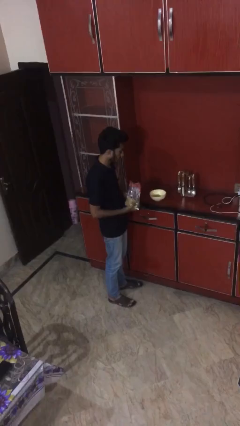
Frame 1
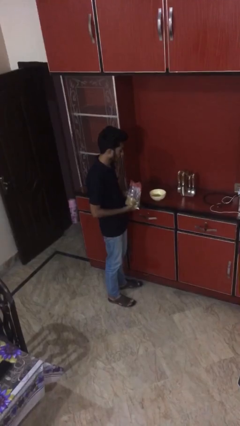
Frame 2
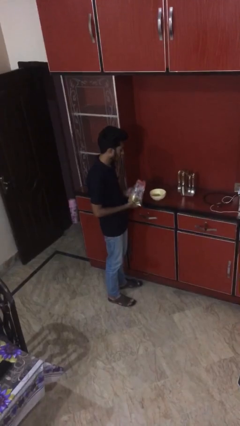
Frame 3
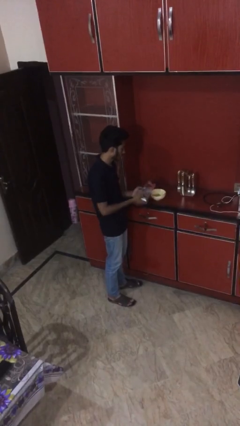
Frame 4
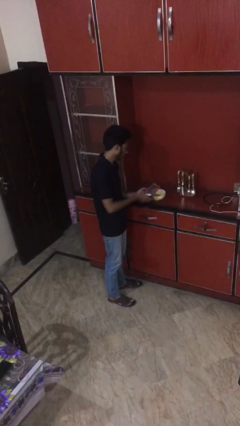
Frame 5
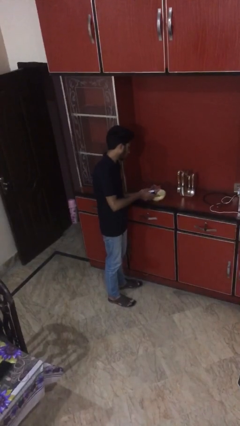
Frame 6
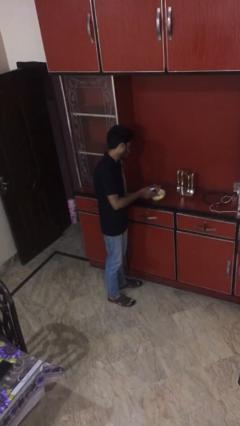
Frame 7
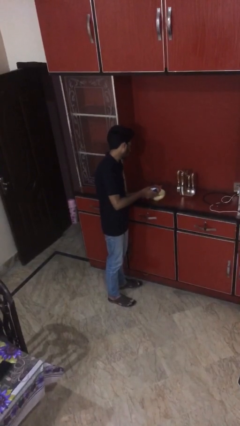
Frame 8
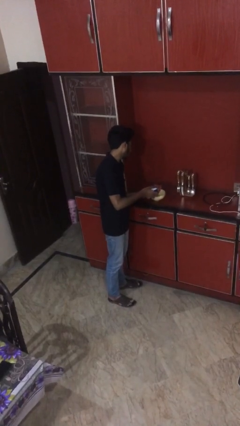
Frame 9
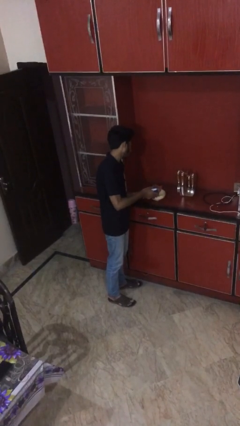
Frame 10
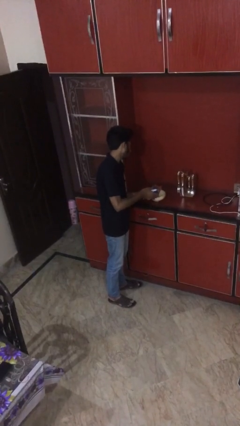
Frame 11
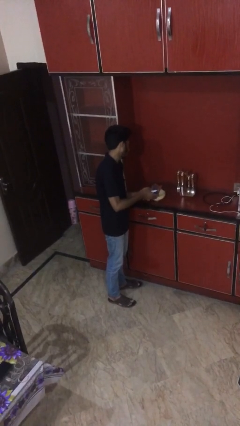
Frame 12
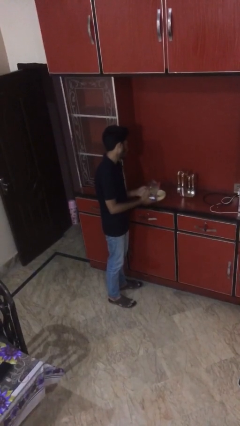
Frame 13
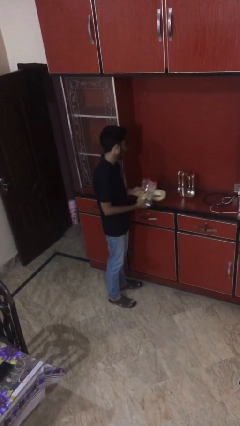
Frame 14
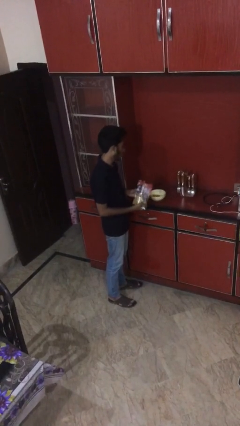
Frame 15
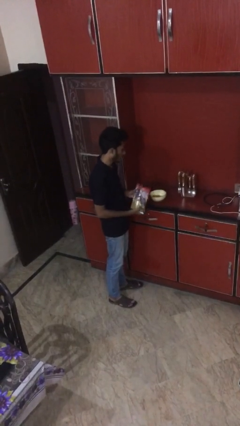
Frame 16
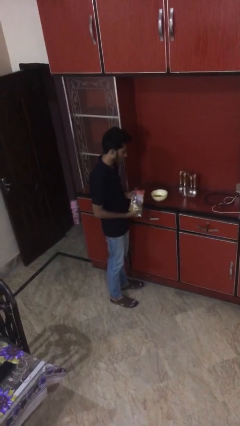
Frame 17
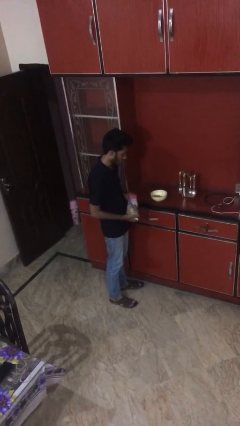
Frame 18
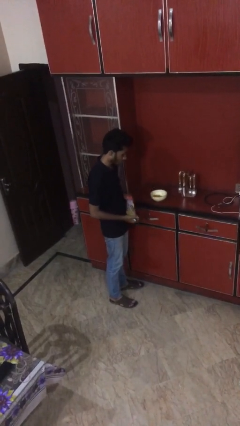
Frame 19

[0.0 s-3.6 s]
person pours into bowl

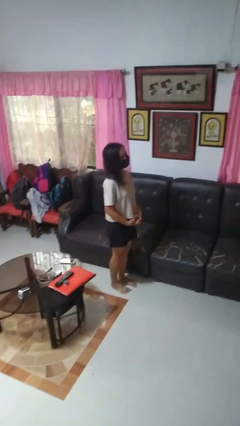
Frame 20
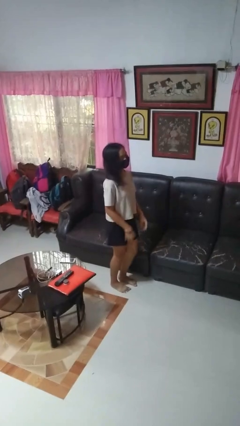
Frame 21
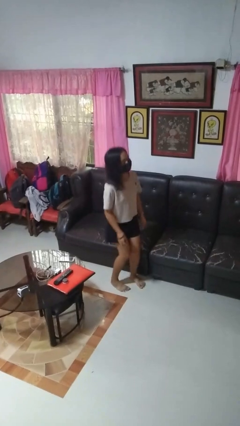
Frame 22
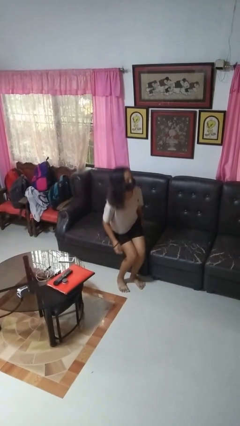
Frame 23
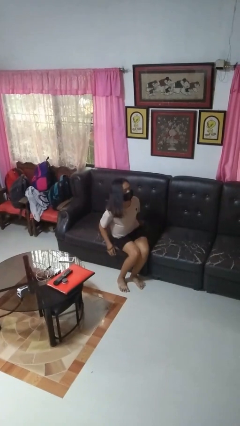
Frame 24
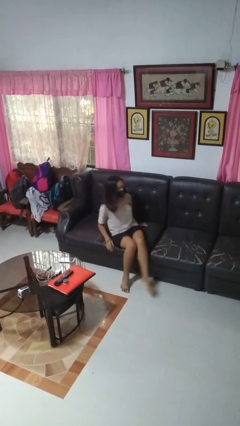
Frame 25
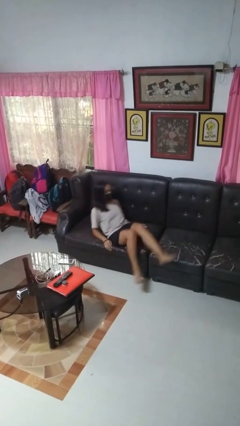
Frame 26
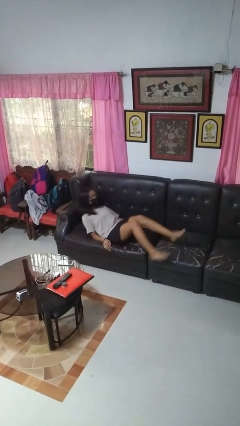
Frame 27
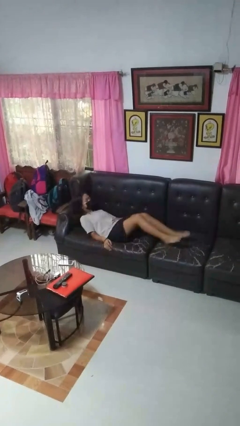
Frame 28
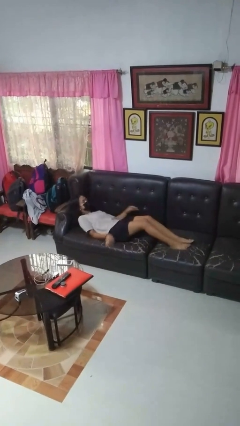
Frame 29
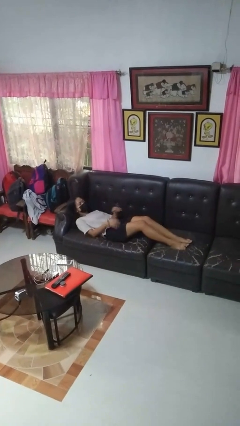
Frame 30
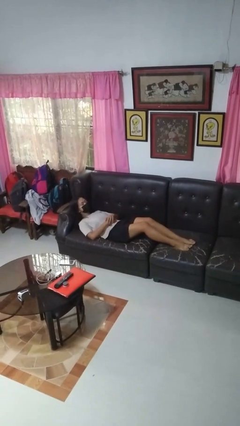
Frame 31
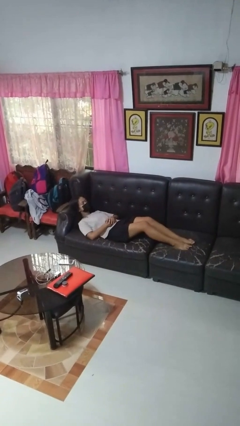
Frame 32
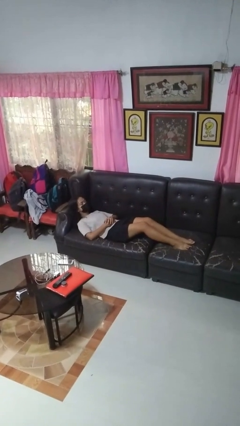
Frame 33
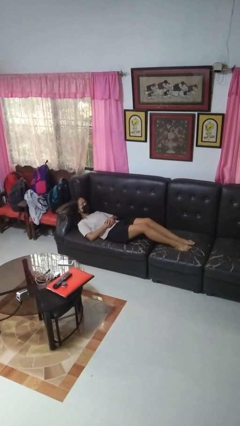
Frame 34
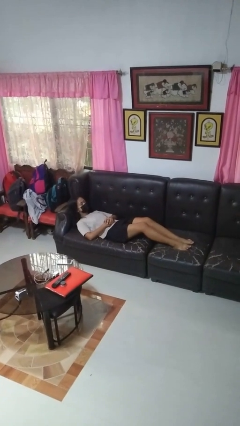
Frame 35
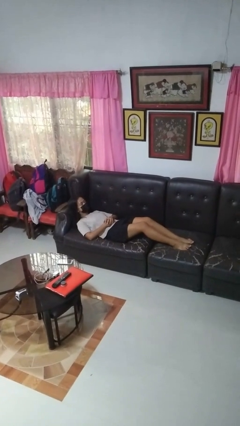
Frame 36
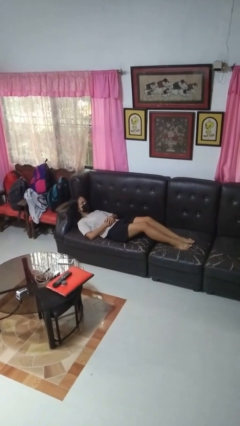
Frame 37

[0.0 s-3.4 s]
person lies down on couch

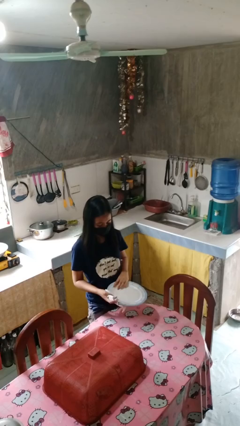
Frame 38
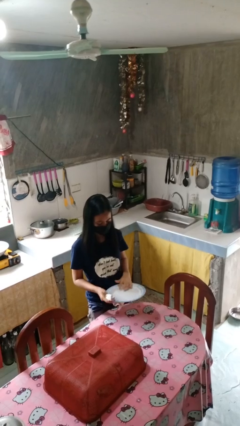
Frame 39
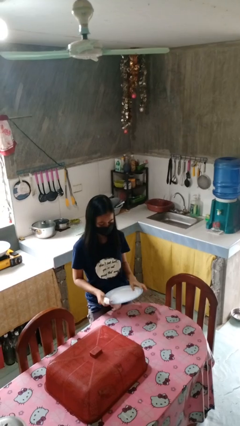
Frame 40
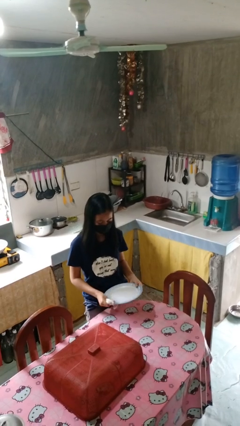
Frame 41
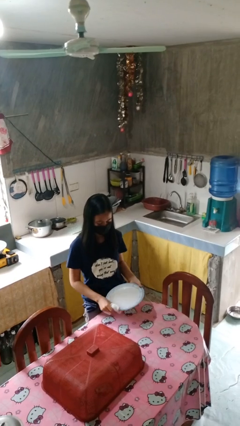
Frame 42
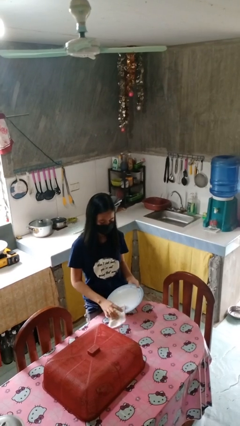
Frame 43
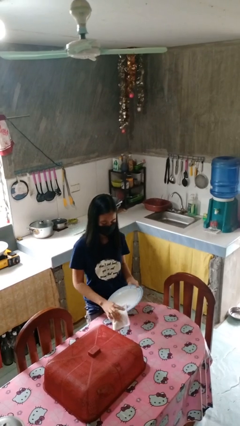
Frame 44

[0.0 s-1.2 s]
person dries dish

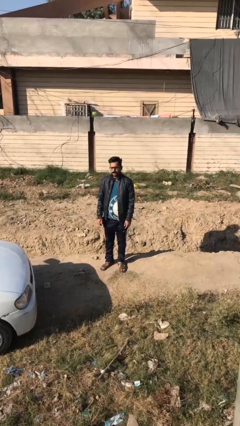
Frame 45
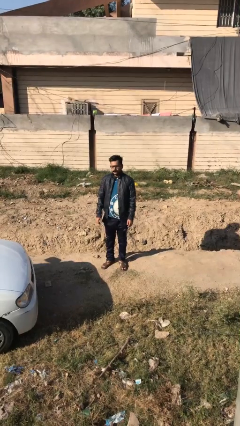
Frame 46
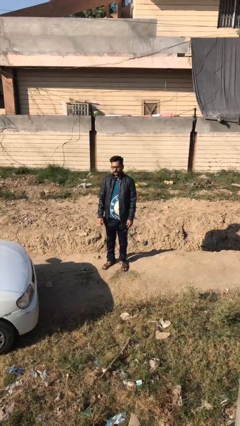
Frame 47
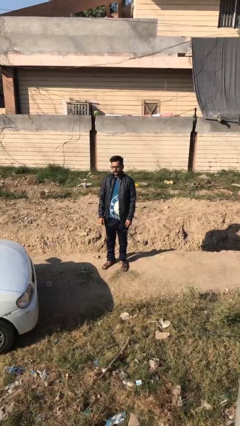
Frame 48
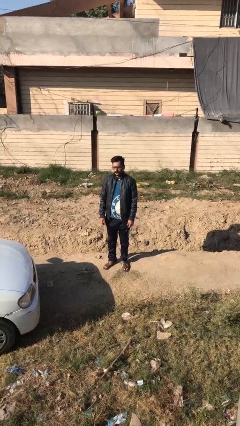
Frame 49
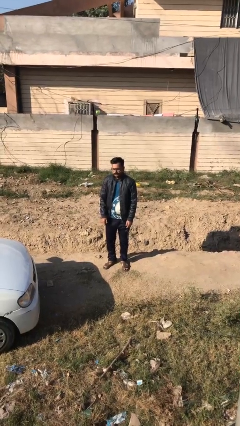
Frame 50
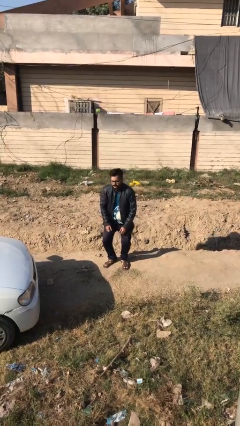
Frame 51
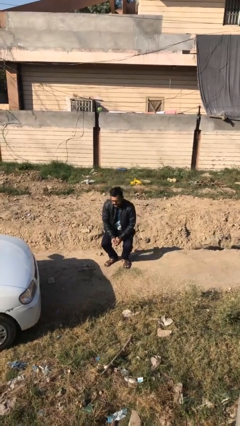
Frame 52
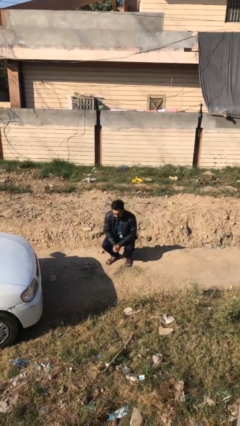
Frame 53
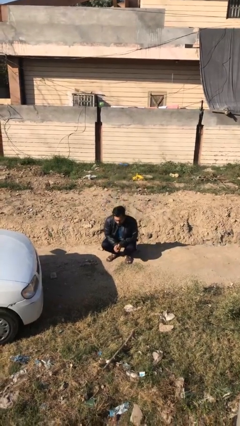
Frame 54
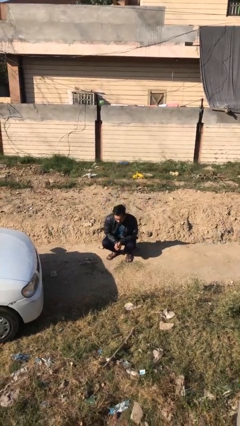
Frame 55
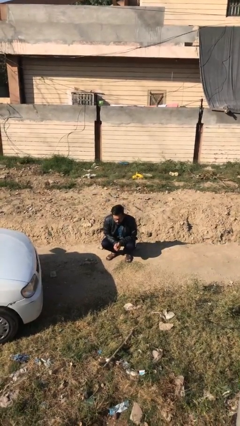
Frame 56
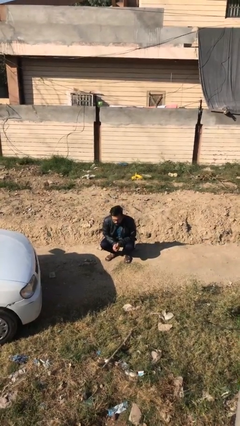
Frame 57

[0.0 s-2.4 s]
person sits down

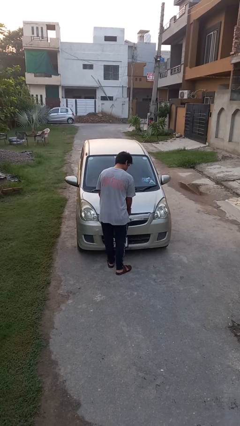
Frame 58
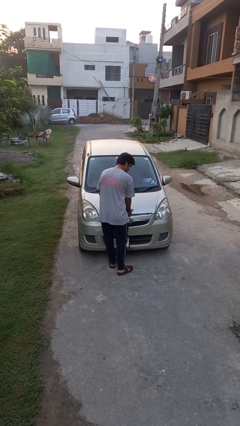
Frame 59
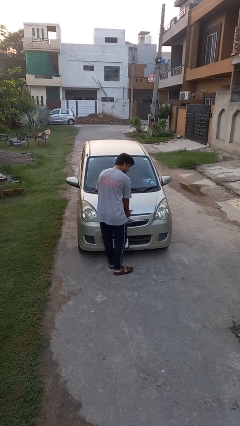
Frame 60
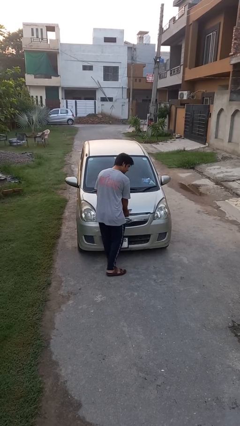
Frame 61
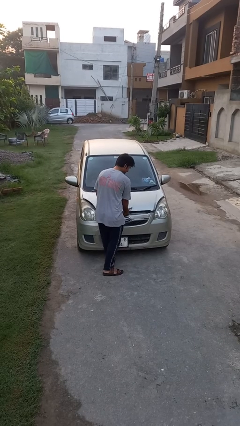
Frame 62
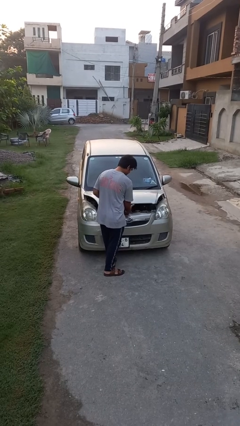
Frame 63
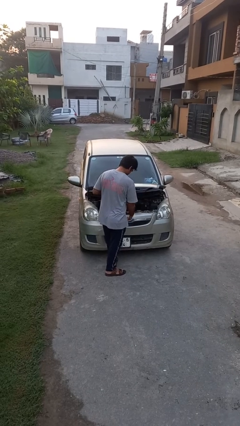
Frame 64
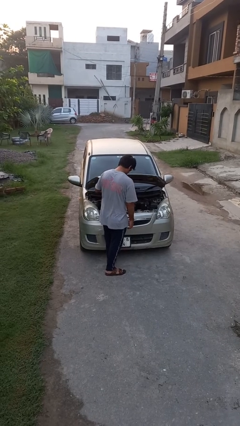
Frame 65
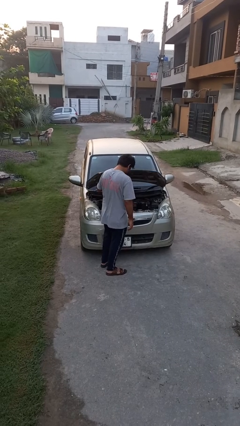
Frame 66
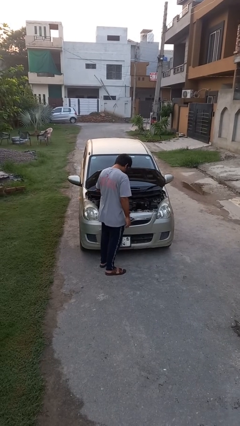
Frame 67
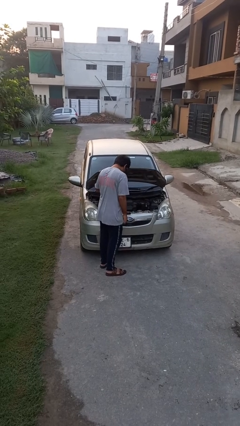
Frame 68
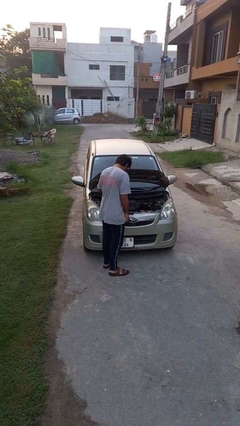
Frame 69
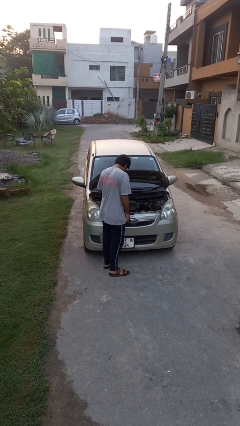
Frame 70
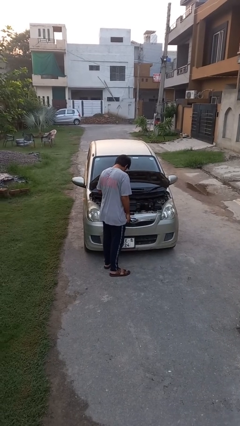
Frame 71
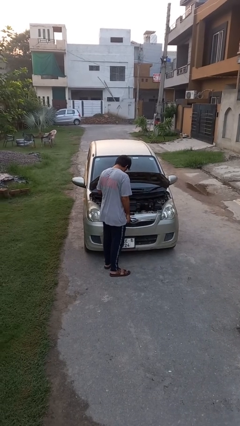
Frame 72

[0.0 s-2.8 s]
person opens car hood

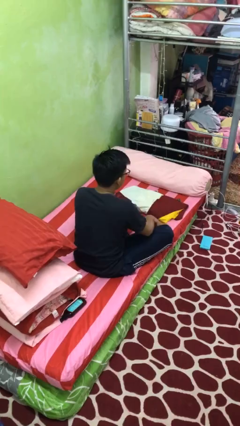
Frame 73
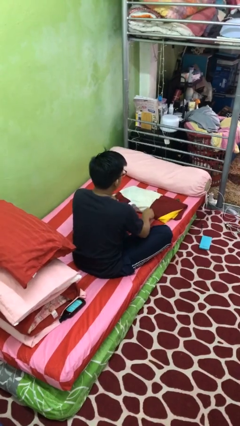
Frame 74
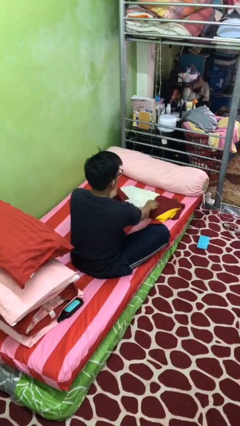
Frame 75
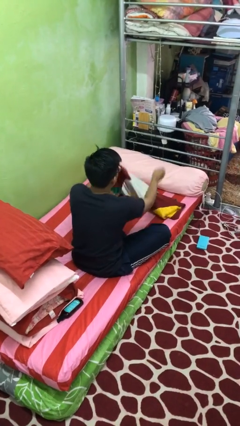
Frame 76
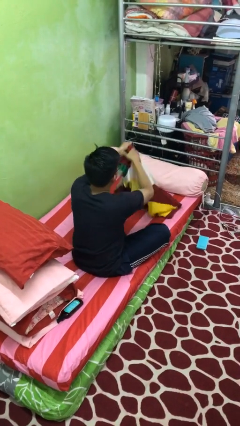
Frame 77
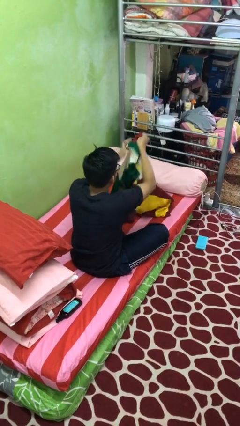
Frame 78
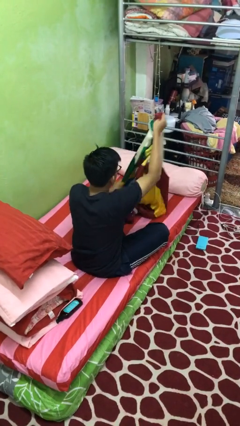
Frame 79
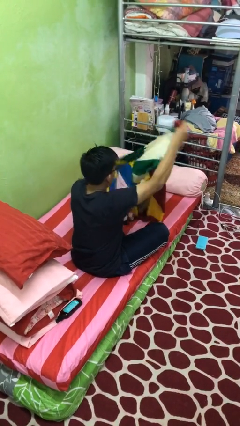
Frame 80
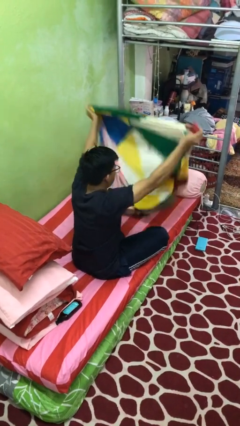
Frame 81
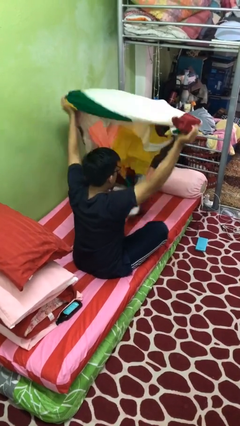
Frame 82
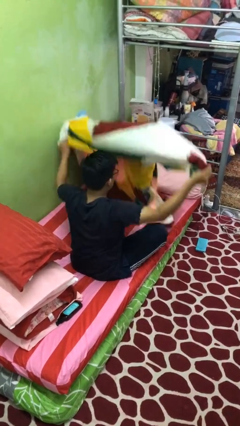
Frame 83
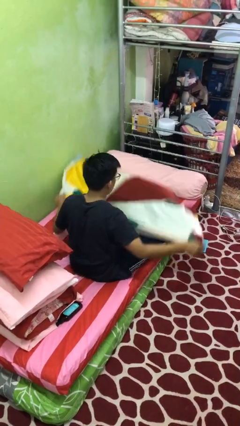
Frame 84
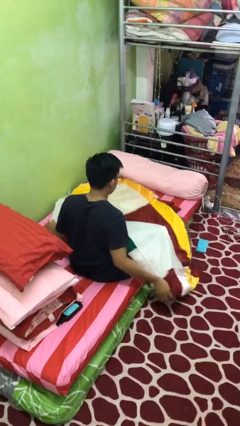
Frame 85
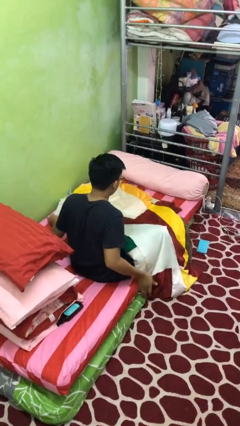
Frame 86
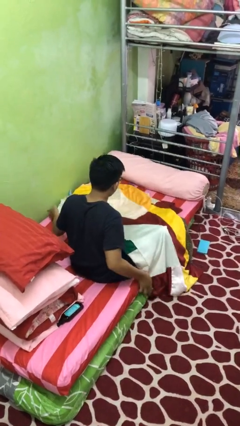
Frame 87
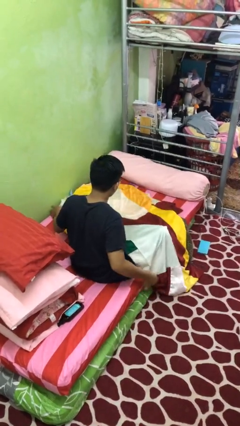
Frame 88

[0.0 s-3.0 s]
person unfolds blanket

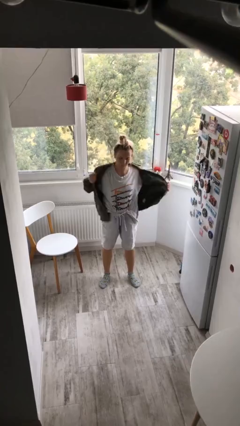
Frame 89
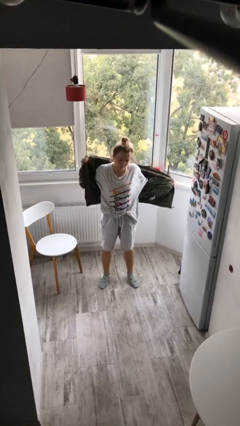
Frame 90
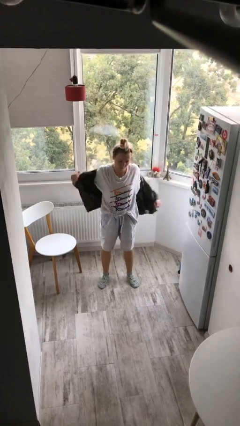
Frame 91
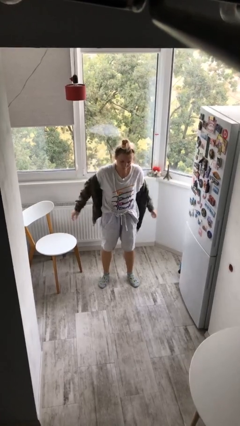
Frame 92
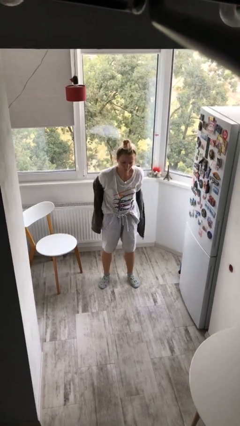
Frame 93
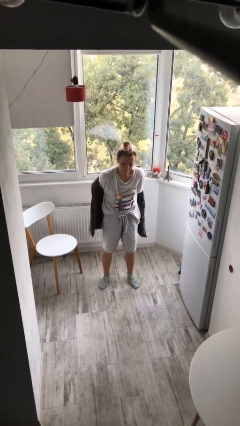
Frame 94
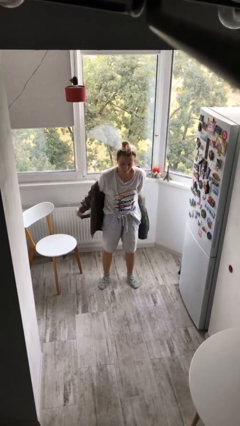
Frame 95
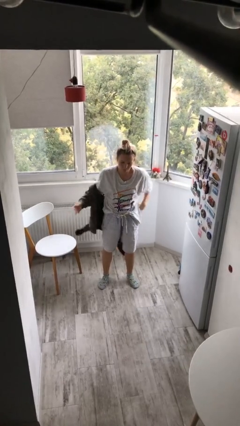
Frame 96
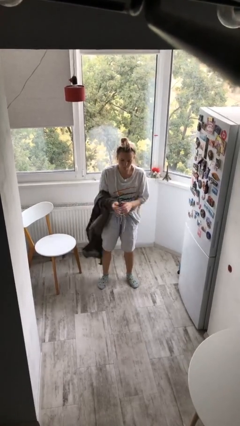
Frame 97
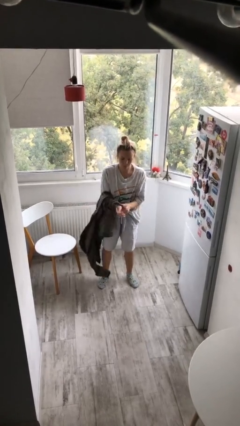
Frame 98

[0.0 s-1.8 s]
person takes off jacket
